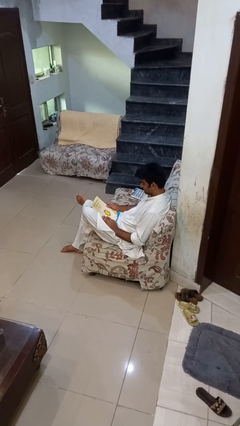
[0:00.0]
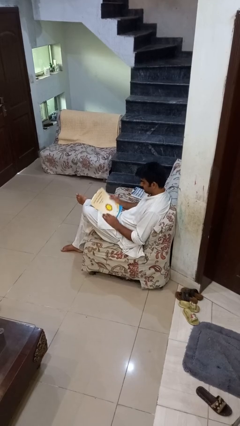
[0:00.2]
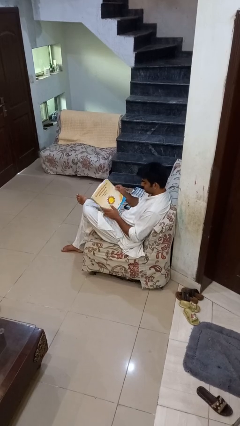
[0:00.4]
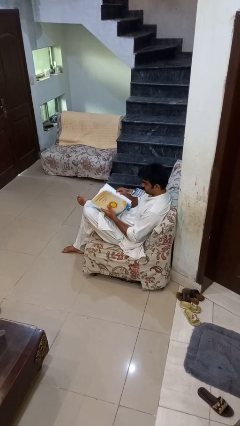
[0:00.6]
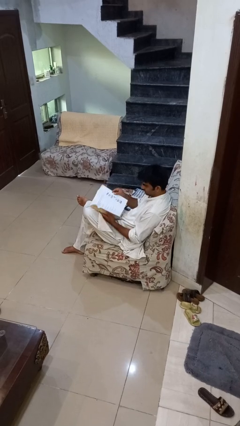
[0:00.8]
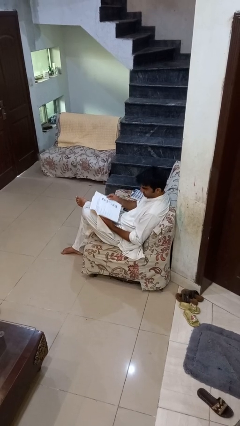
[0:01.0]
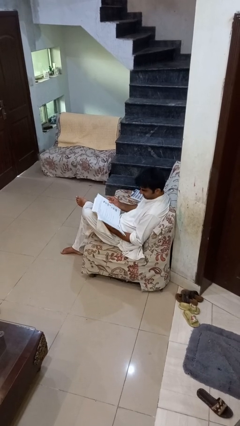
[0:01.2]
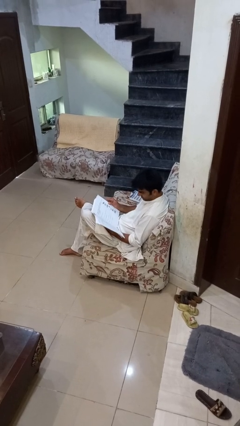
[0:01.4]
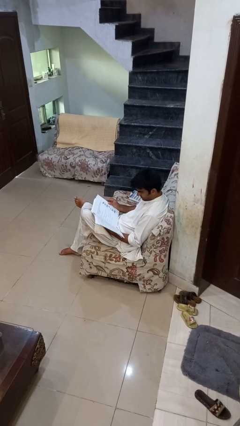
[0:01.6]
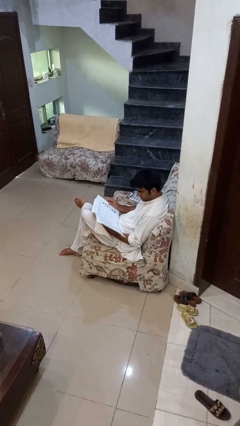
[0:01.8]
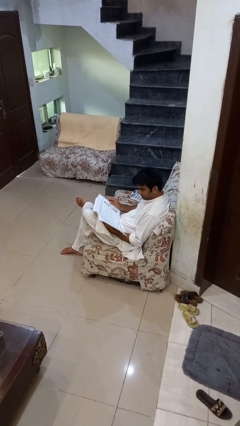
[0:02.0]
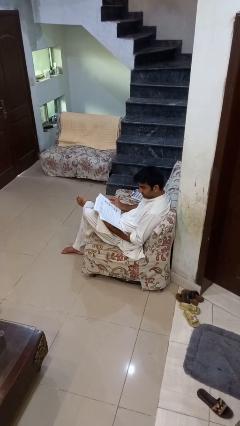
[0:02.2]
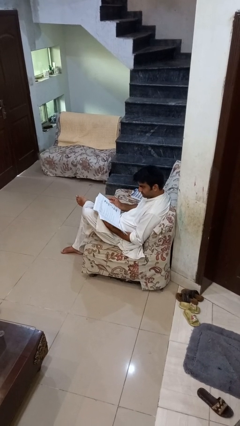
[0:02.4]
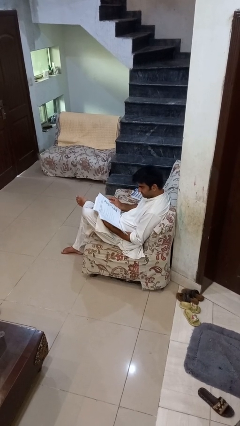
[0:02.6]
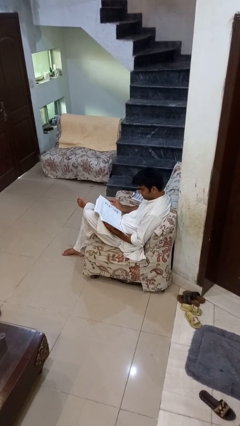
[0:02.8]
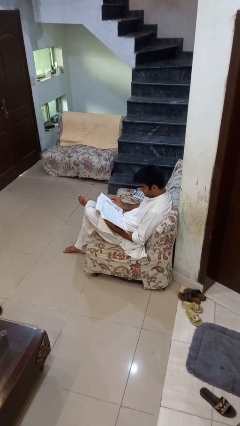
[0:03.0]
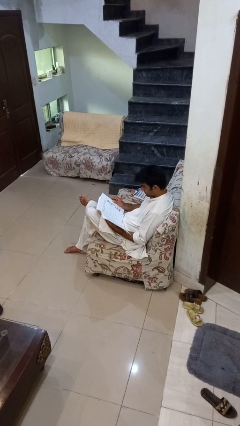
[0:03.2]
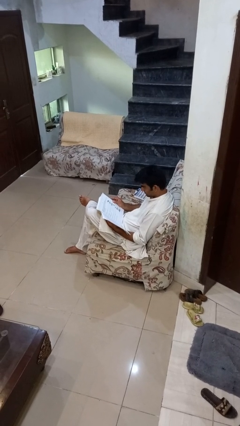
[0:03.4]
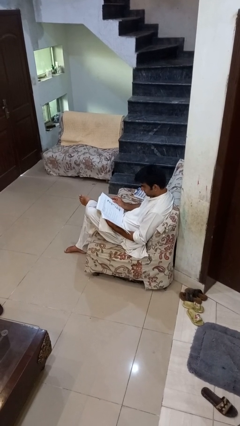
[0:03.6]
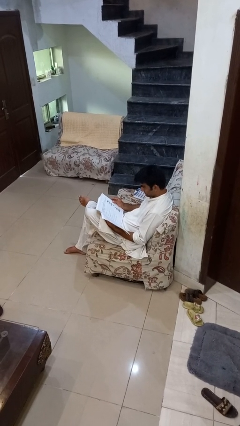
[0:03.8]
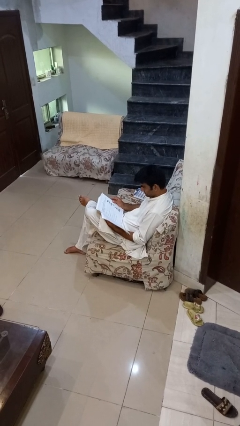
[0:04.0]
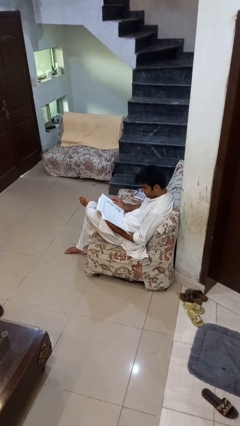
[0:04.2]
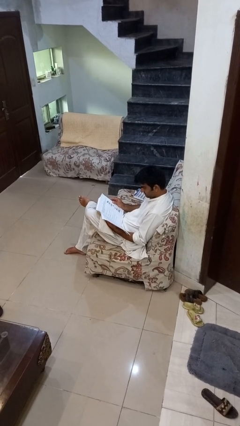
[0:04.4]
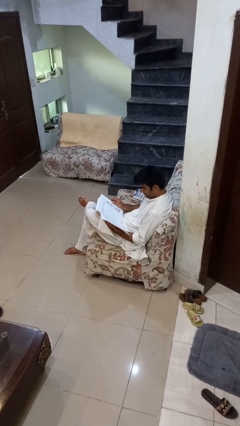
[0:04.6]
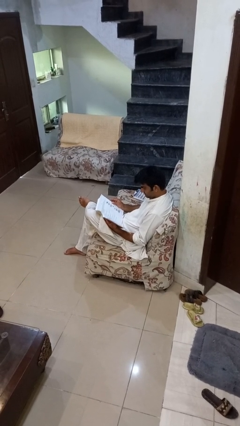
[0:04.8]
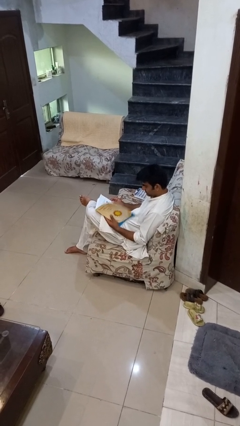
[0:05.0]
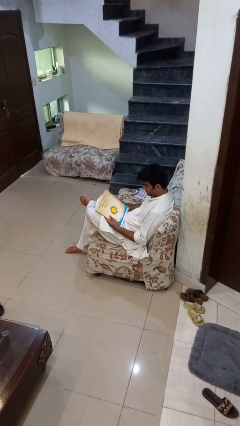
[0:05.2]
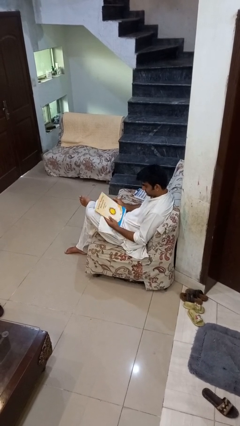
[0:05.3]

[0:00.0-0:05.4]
person reads book

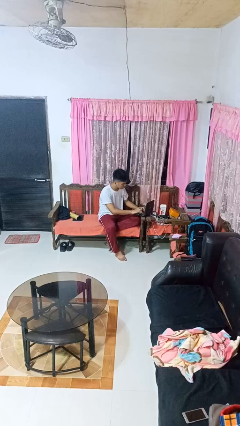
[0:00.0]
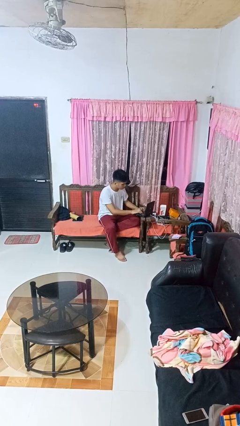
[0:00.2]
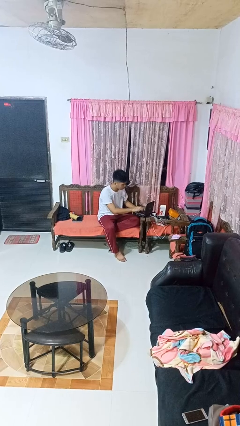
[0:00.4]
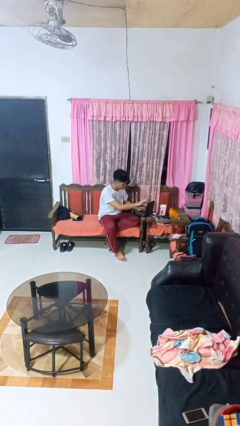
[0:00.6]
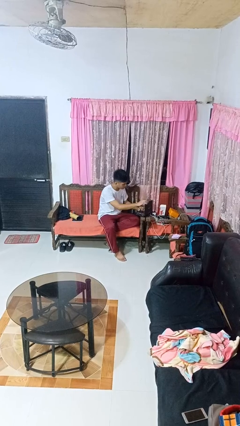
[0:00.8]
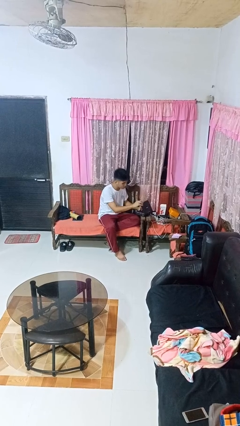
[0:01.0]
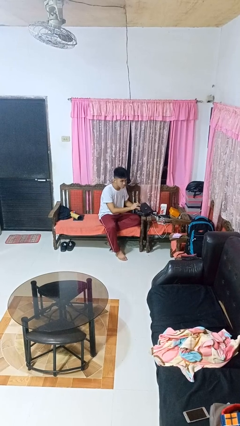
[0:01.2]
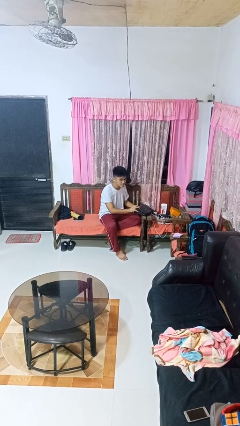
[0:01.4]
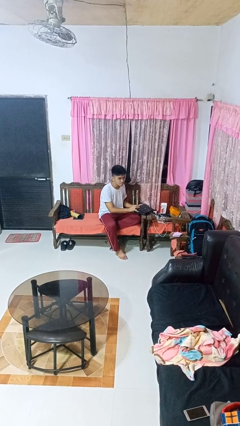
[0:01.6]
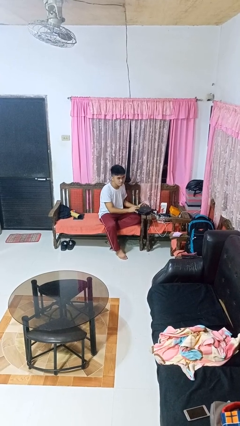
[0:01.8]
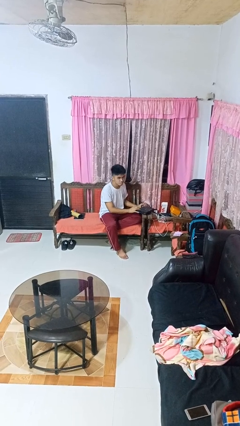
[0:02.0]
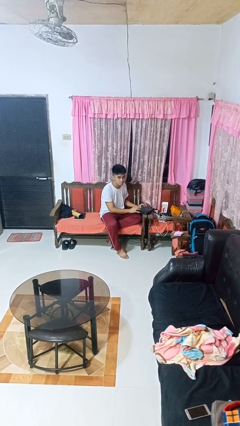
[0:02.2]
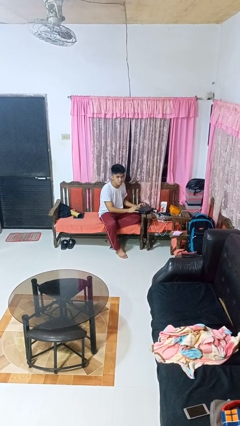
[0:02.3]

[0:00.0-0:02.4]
person closes laptop

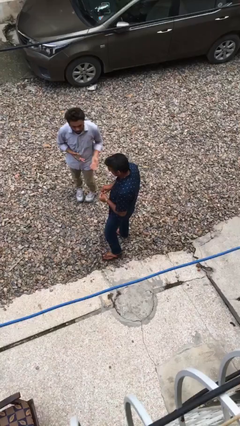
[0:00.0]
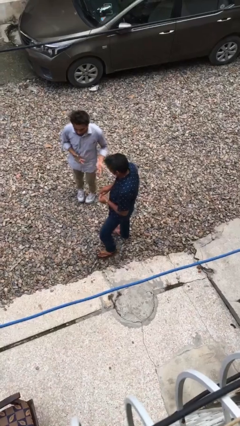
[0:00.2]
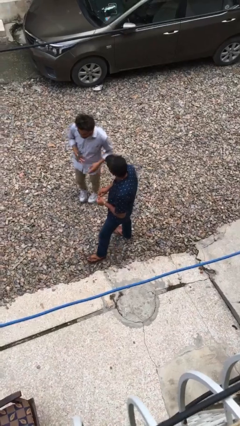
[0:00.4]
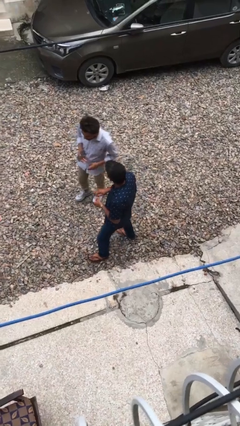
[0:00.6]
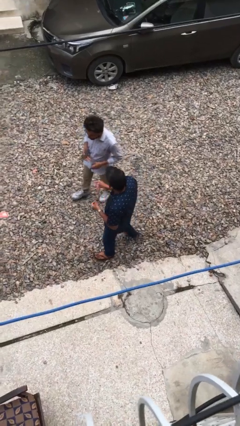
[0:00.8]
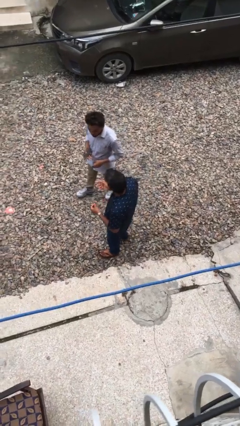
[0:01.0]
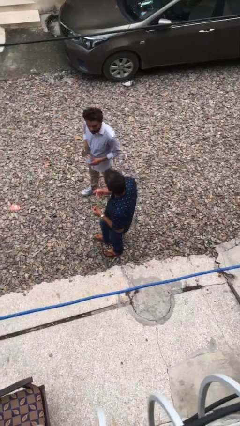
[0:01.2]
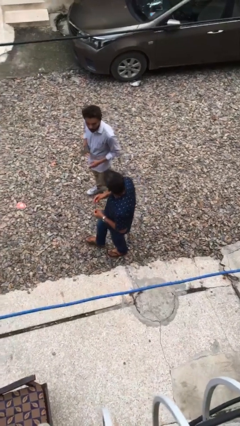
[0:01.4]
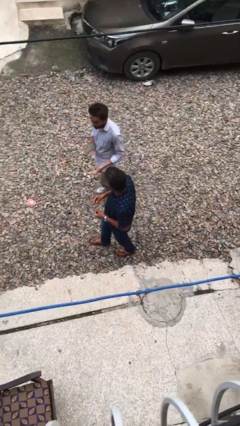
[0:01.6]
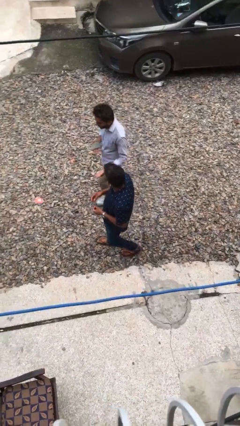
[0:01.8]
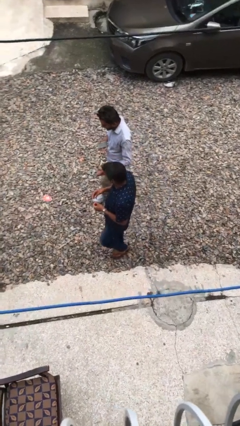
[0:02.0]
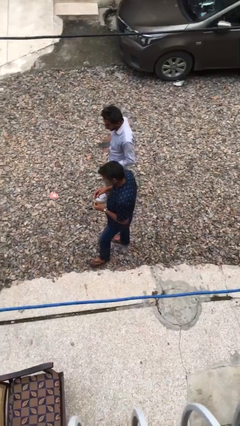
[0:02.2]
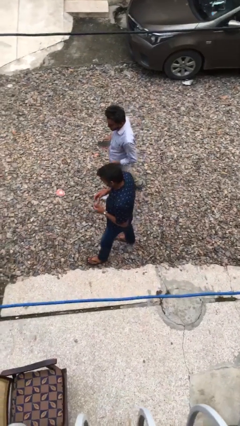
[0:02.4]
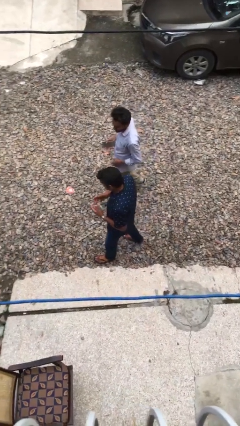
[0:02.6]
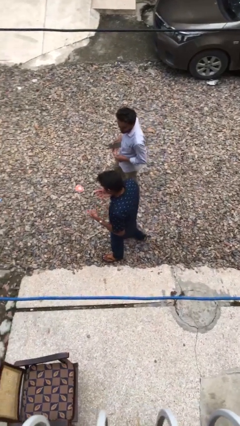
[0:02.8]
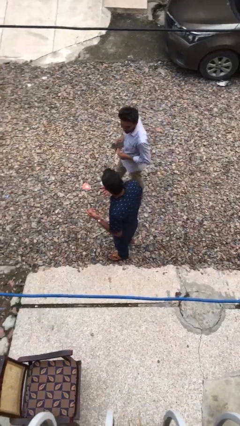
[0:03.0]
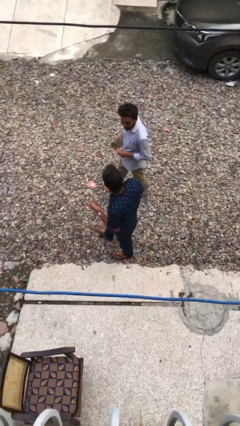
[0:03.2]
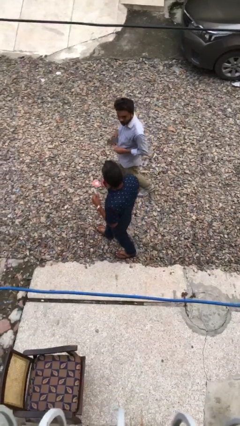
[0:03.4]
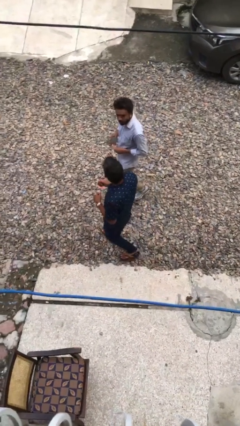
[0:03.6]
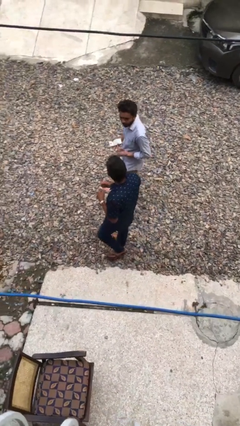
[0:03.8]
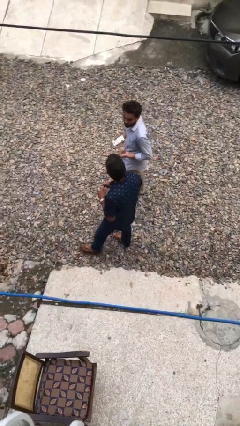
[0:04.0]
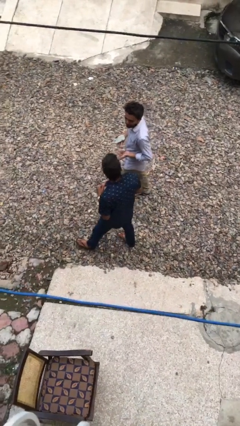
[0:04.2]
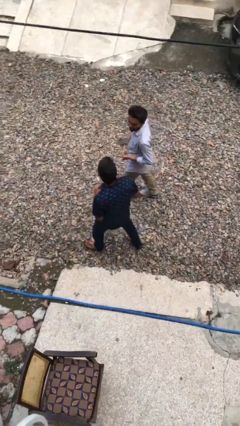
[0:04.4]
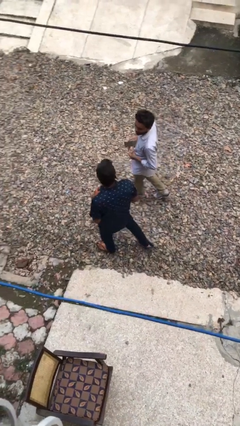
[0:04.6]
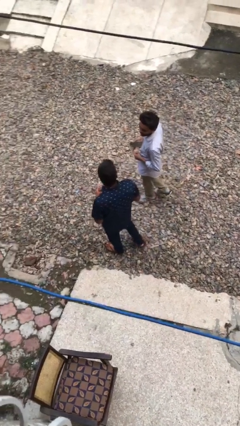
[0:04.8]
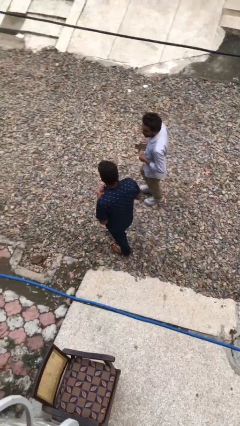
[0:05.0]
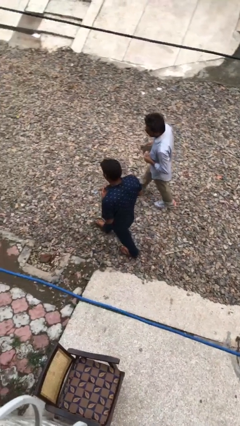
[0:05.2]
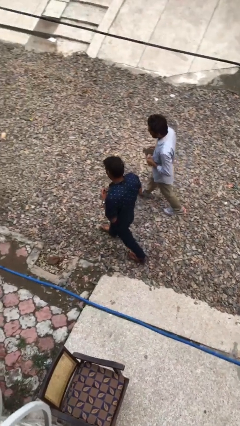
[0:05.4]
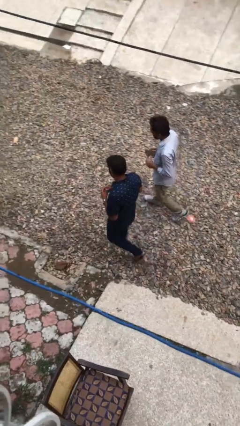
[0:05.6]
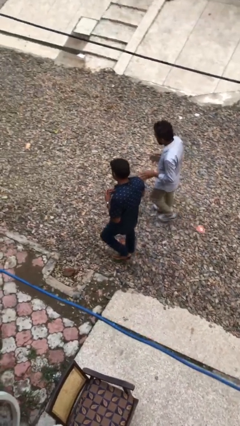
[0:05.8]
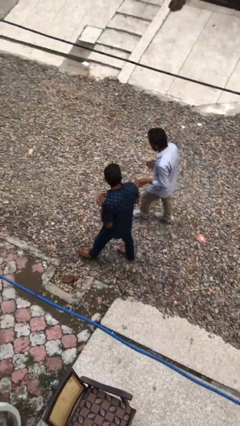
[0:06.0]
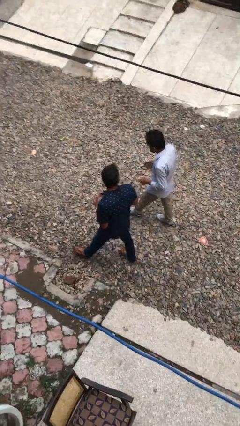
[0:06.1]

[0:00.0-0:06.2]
person talks to person

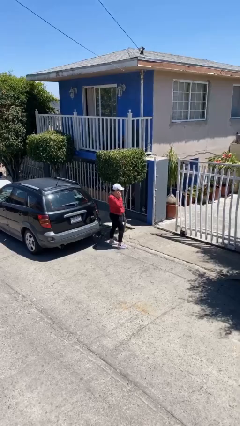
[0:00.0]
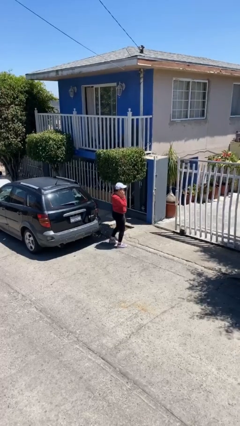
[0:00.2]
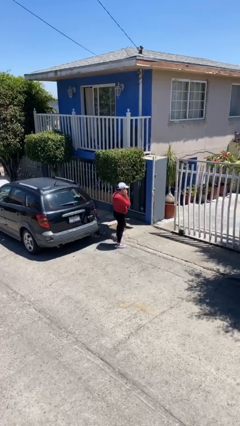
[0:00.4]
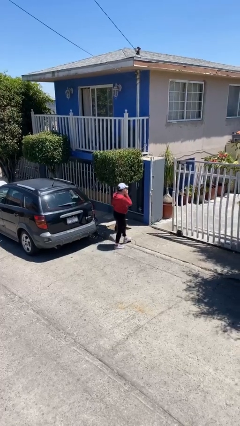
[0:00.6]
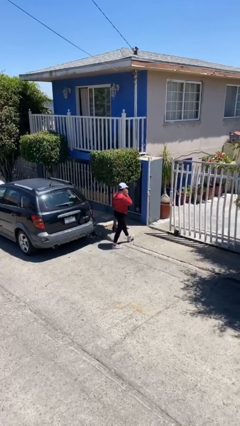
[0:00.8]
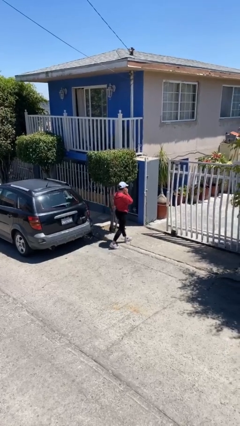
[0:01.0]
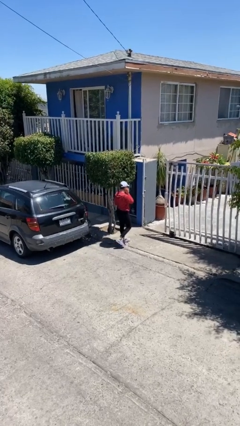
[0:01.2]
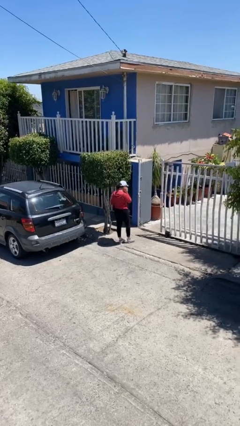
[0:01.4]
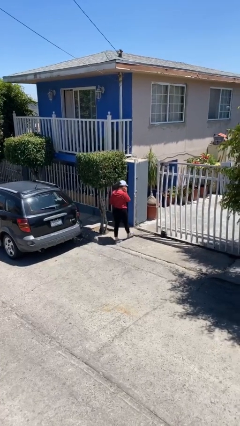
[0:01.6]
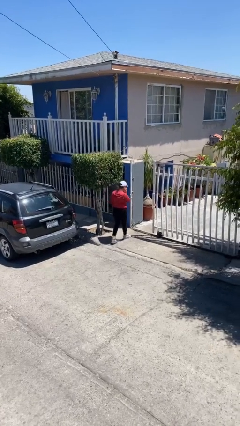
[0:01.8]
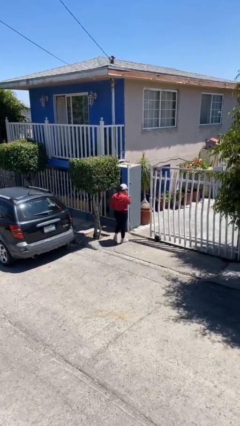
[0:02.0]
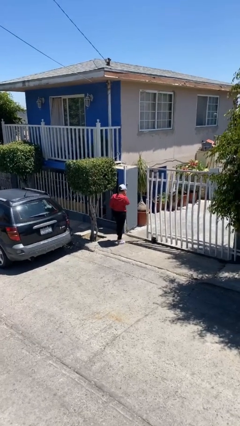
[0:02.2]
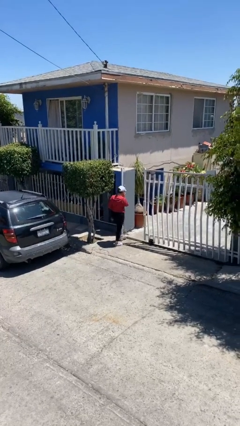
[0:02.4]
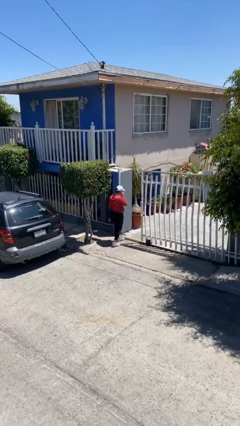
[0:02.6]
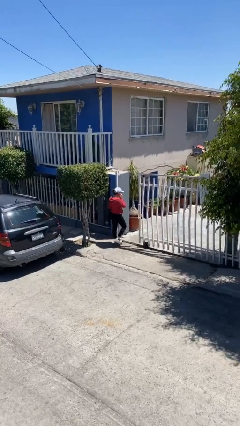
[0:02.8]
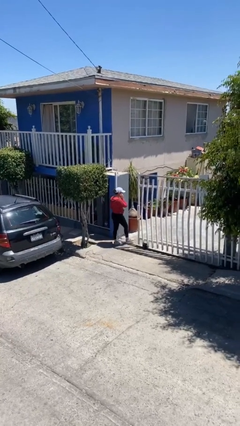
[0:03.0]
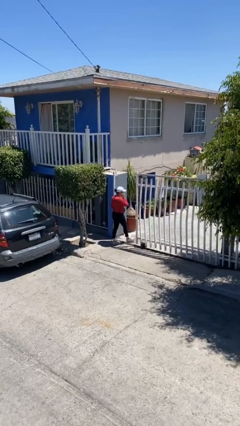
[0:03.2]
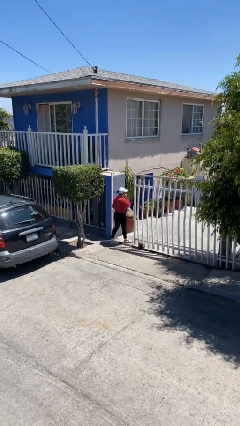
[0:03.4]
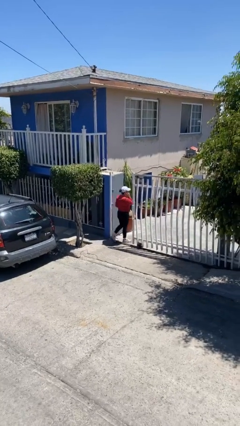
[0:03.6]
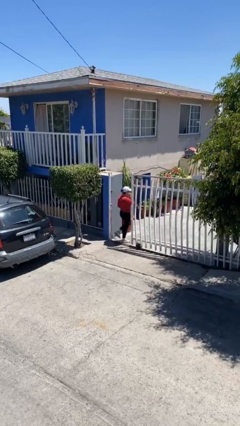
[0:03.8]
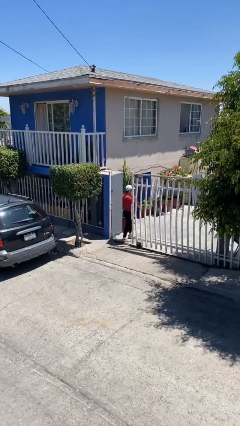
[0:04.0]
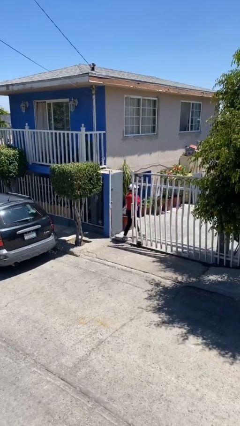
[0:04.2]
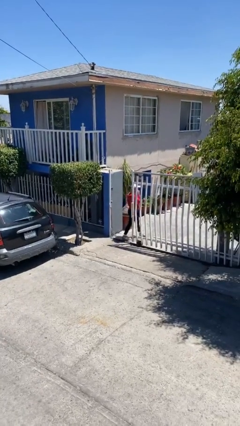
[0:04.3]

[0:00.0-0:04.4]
person exits scene through structure
